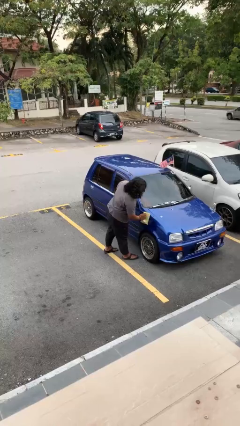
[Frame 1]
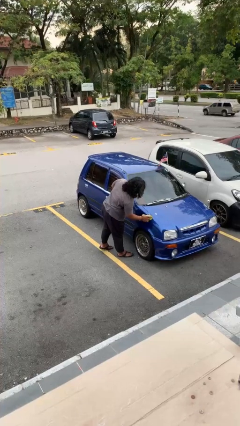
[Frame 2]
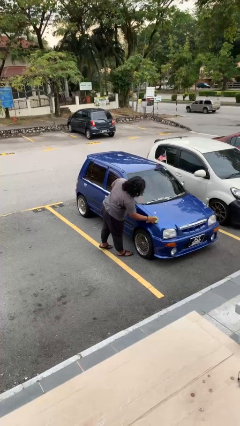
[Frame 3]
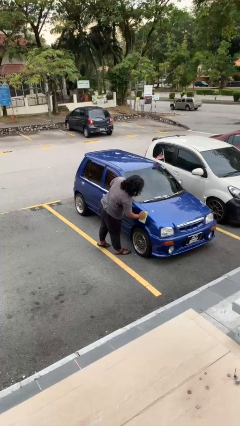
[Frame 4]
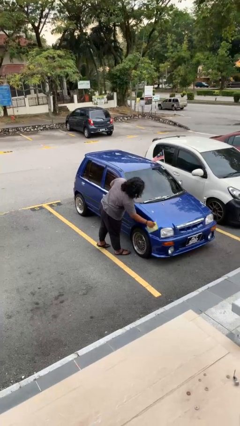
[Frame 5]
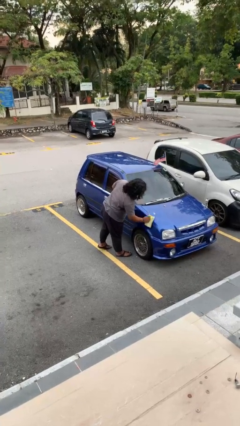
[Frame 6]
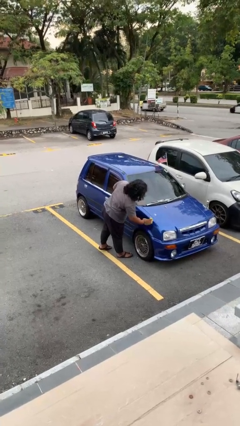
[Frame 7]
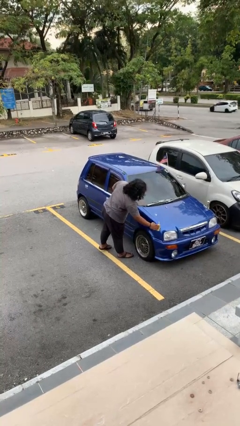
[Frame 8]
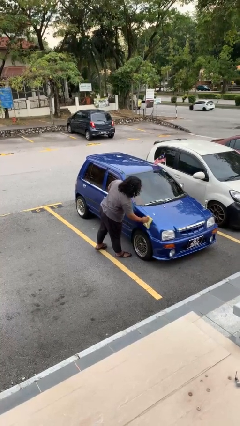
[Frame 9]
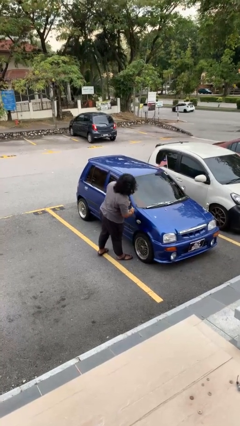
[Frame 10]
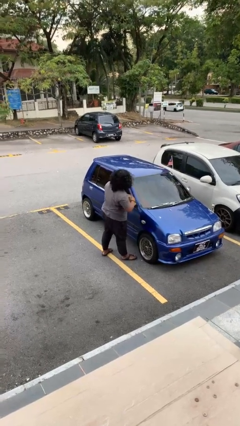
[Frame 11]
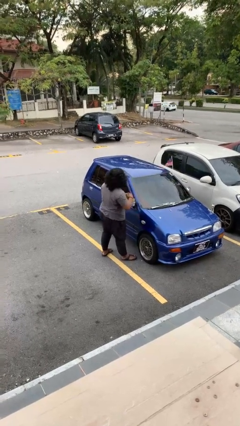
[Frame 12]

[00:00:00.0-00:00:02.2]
person polishes car with rag

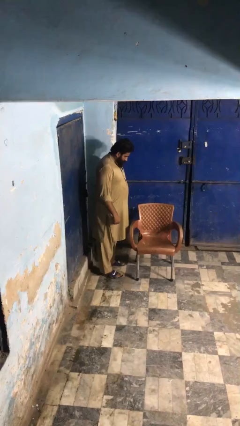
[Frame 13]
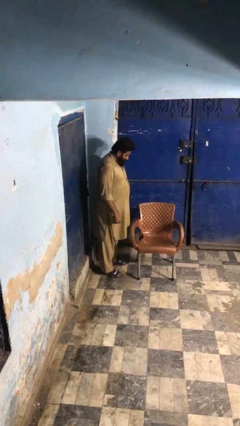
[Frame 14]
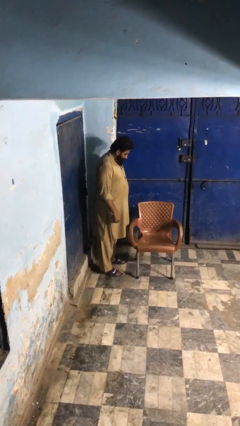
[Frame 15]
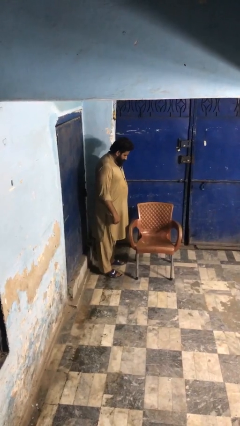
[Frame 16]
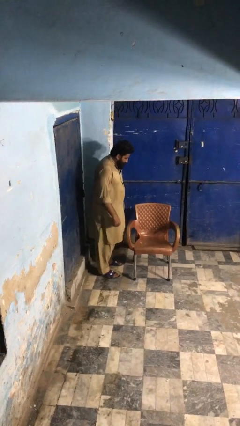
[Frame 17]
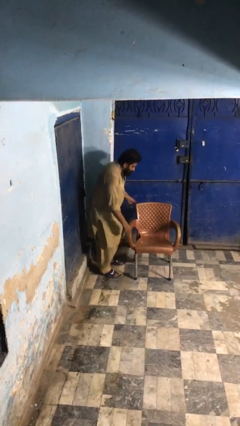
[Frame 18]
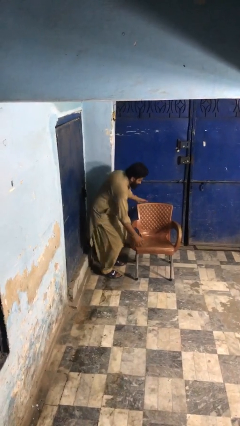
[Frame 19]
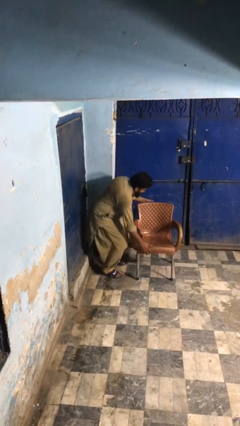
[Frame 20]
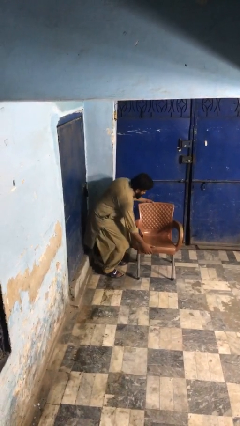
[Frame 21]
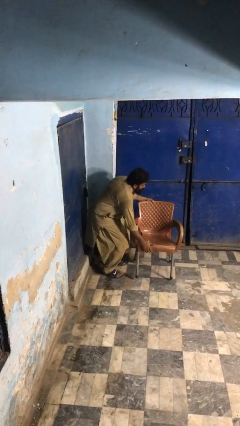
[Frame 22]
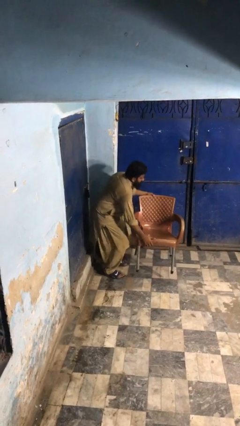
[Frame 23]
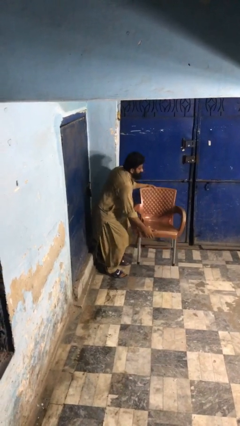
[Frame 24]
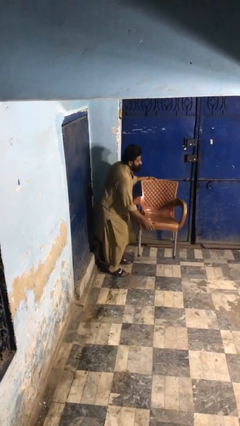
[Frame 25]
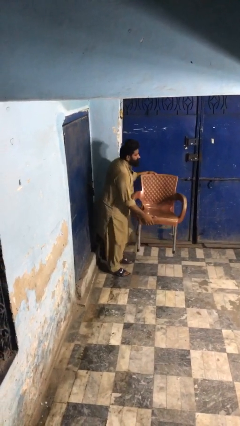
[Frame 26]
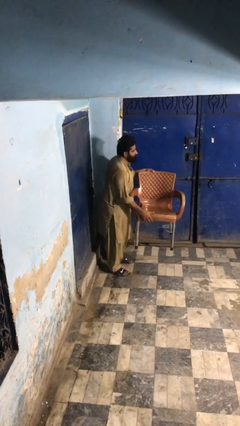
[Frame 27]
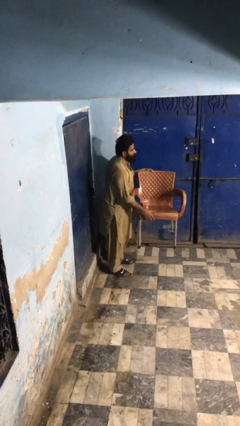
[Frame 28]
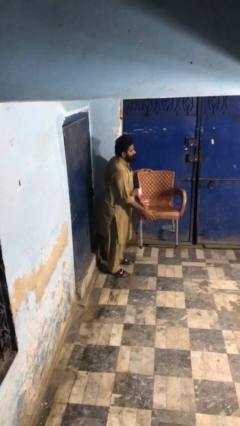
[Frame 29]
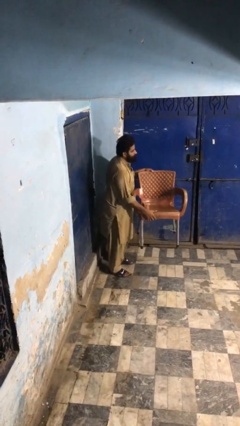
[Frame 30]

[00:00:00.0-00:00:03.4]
person picks up object from floor

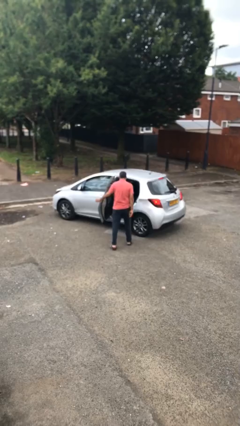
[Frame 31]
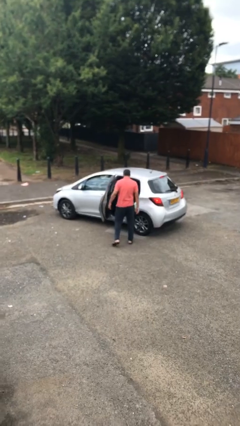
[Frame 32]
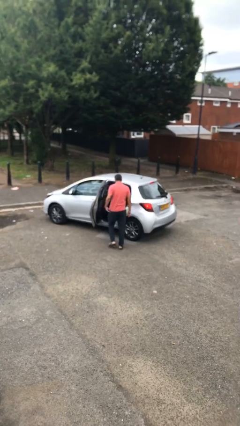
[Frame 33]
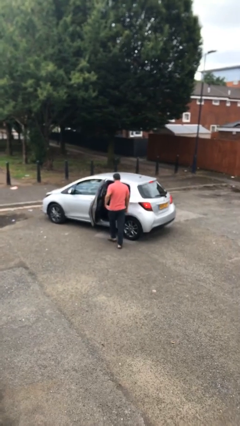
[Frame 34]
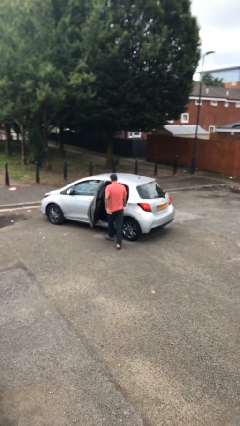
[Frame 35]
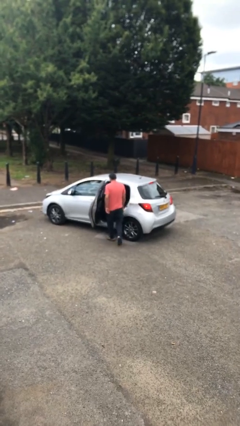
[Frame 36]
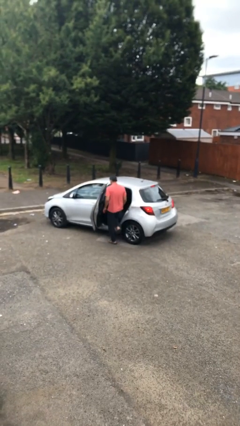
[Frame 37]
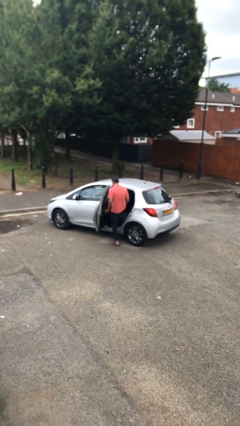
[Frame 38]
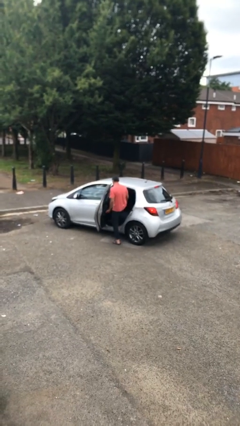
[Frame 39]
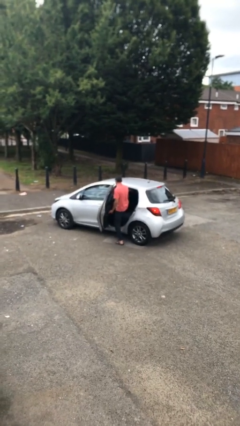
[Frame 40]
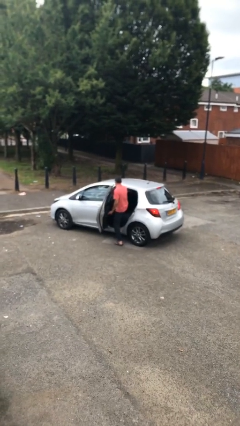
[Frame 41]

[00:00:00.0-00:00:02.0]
person enters car

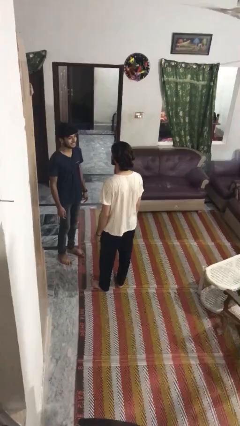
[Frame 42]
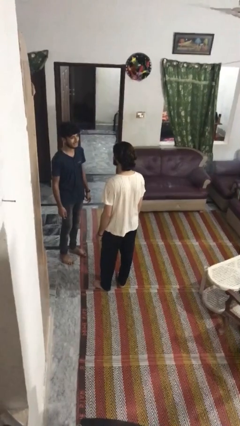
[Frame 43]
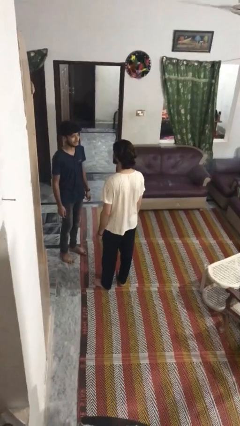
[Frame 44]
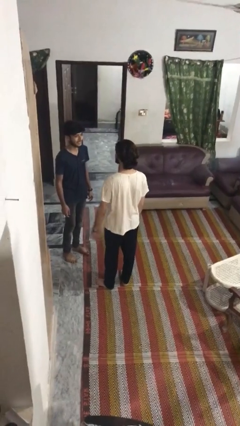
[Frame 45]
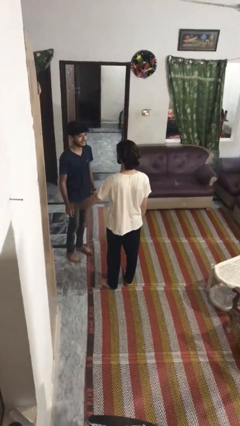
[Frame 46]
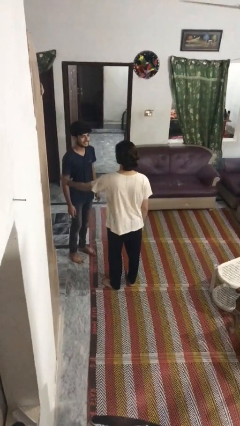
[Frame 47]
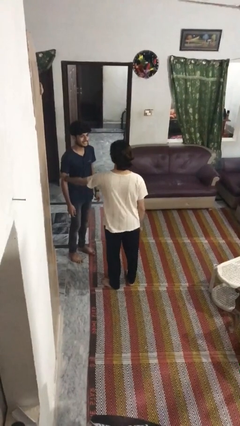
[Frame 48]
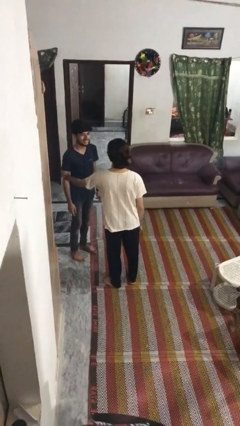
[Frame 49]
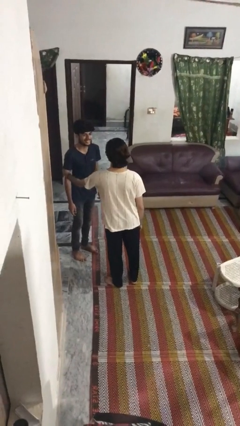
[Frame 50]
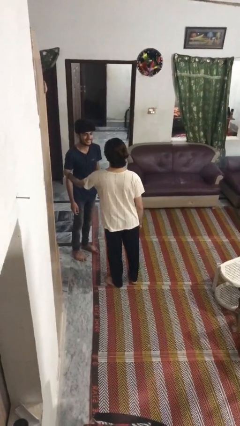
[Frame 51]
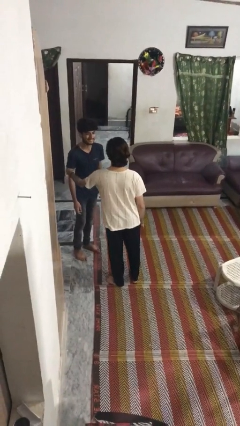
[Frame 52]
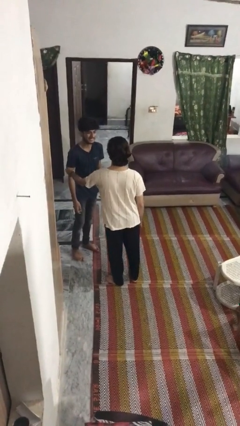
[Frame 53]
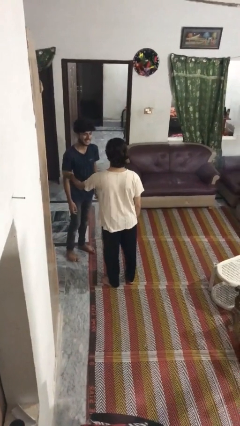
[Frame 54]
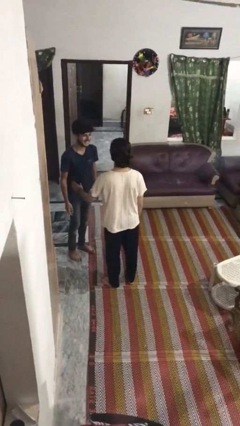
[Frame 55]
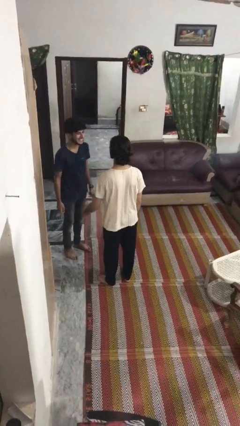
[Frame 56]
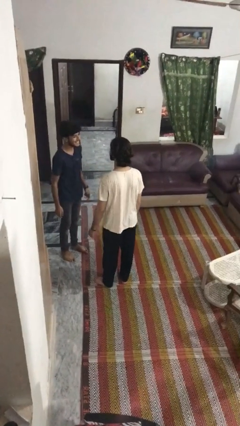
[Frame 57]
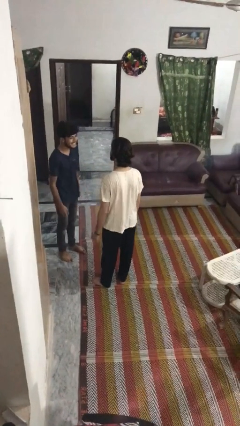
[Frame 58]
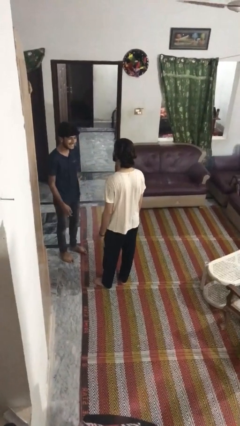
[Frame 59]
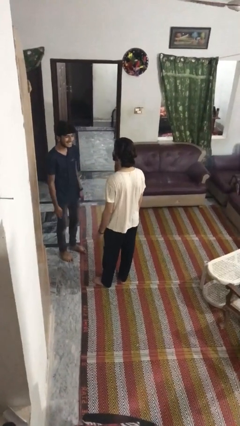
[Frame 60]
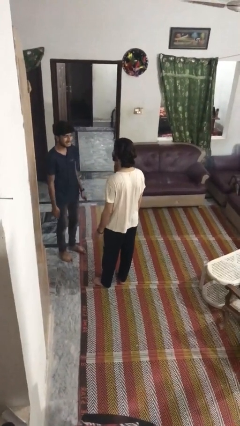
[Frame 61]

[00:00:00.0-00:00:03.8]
person grabs person by bicep

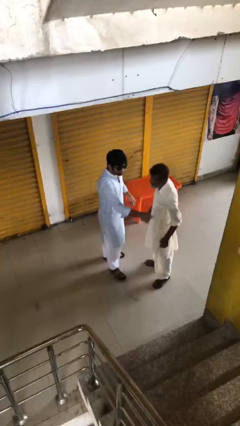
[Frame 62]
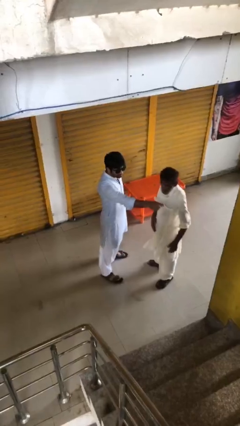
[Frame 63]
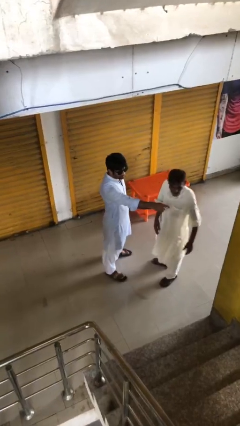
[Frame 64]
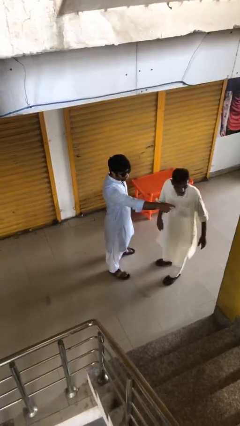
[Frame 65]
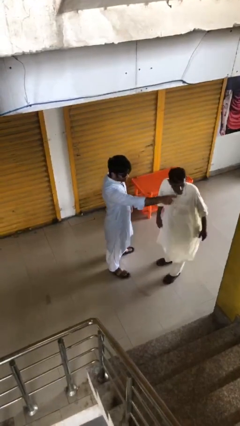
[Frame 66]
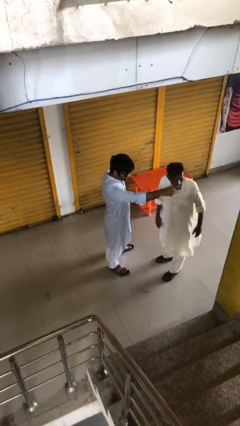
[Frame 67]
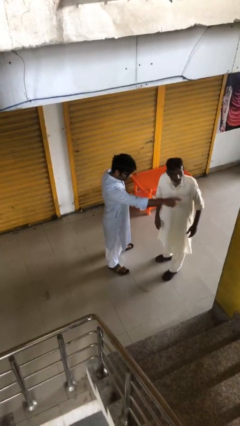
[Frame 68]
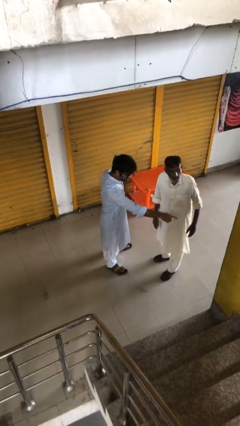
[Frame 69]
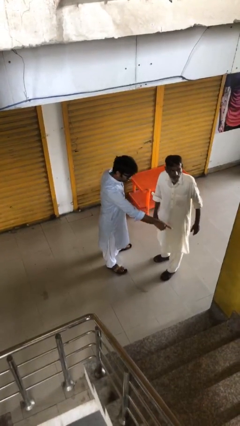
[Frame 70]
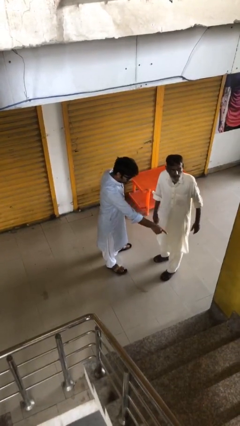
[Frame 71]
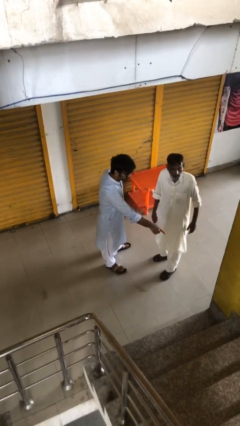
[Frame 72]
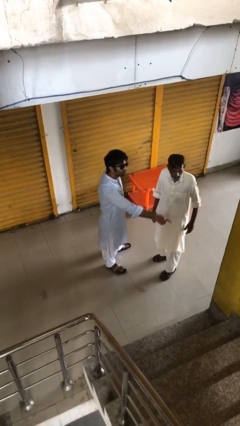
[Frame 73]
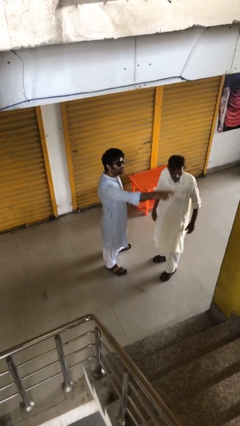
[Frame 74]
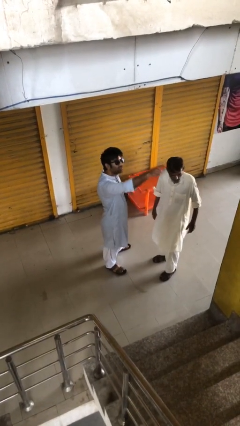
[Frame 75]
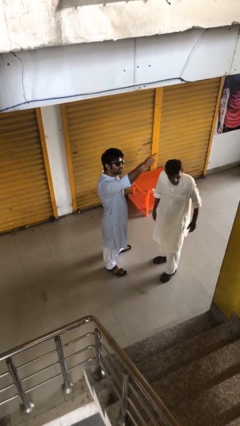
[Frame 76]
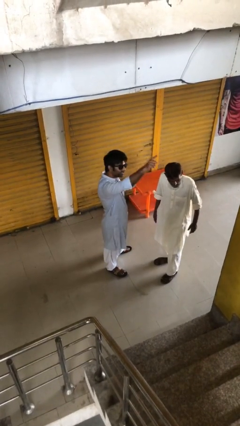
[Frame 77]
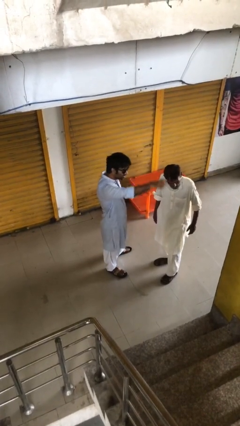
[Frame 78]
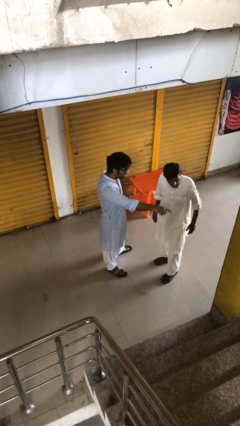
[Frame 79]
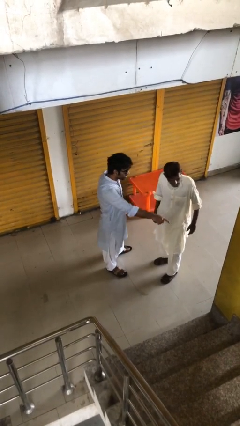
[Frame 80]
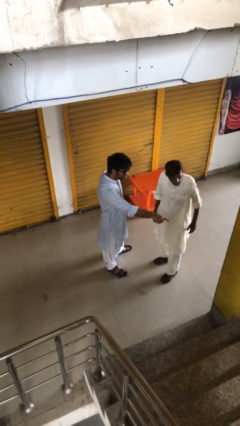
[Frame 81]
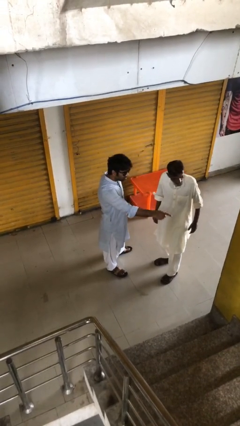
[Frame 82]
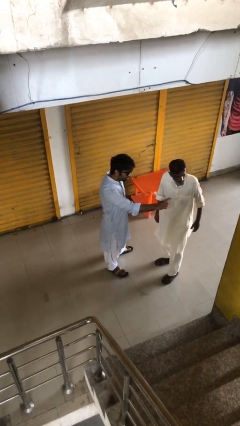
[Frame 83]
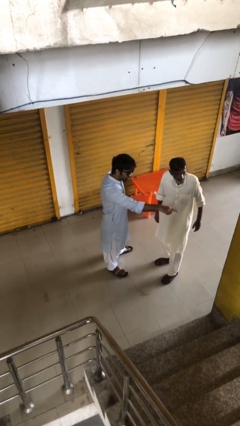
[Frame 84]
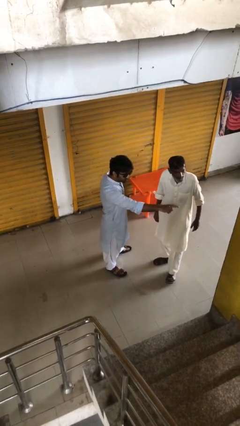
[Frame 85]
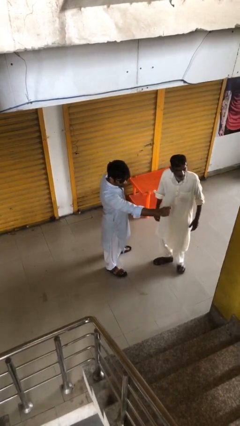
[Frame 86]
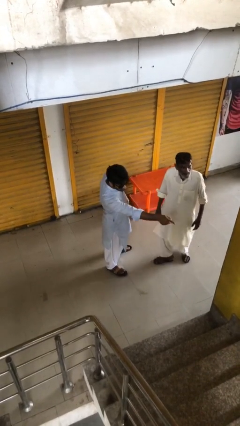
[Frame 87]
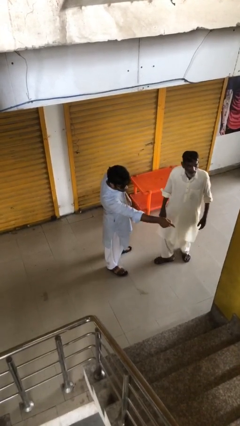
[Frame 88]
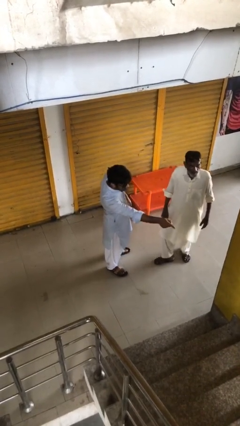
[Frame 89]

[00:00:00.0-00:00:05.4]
person talks to person

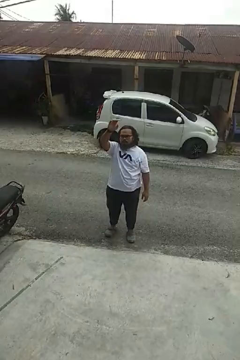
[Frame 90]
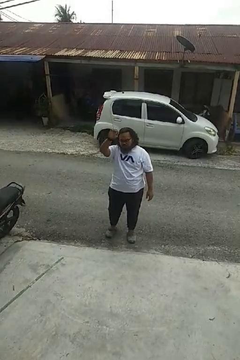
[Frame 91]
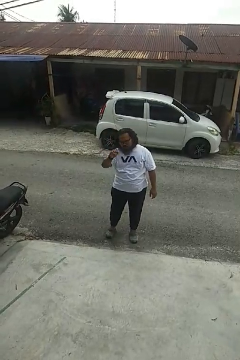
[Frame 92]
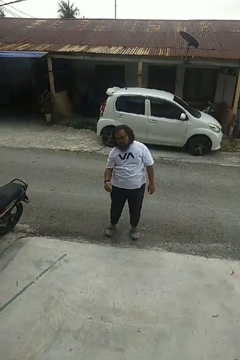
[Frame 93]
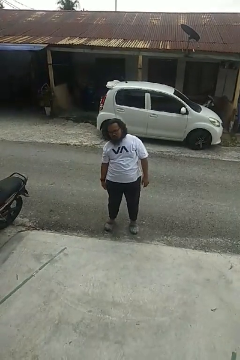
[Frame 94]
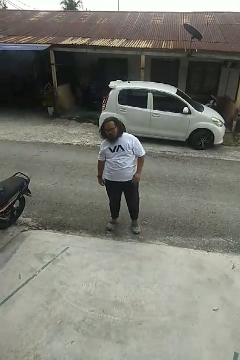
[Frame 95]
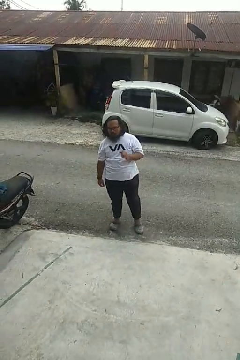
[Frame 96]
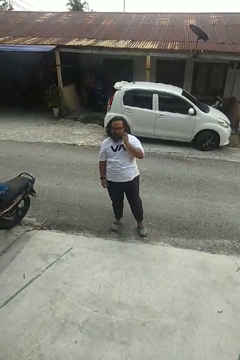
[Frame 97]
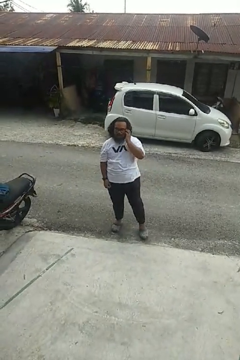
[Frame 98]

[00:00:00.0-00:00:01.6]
person gestures lower hand
